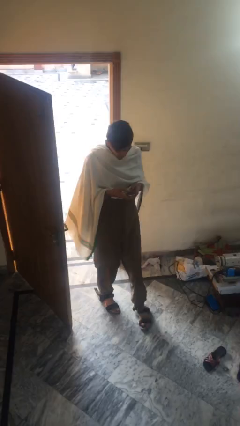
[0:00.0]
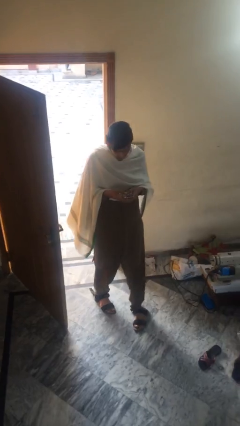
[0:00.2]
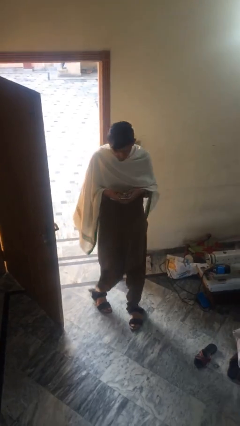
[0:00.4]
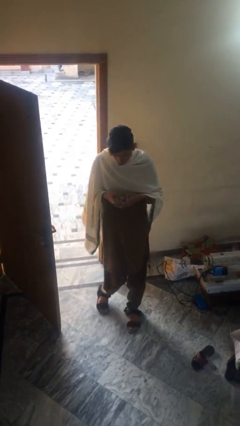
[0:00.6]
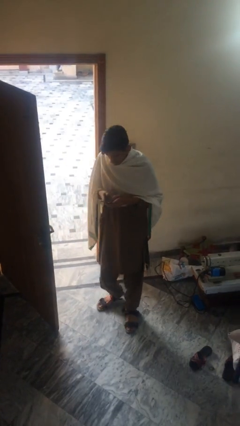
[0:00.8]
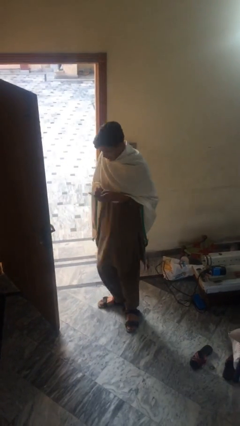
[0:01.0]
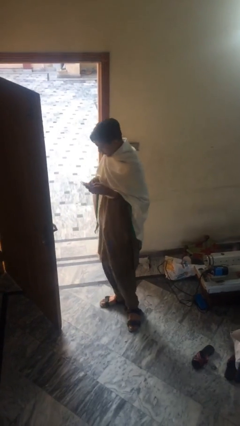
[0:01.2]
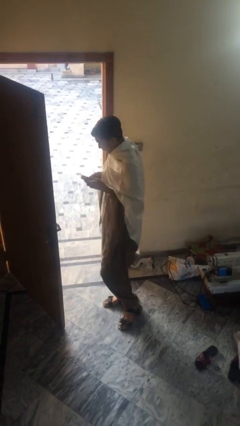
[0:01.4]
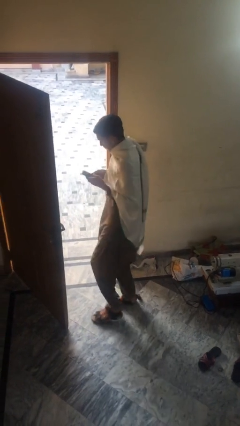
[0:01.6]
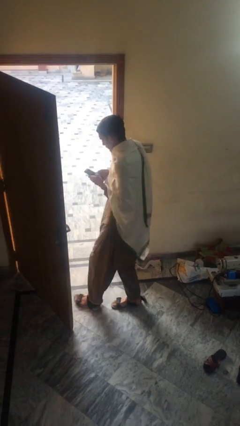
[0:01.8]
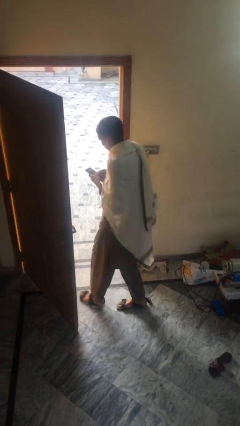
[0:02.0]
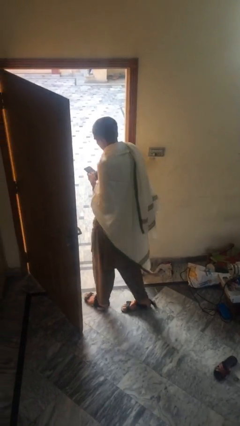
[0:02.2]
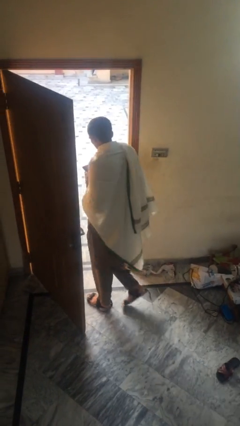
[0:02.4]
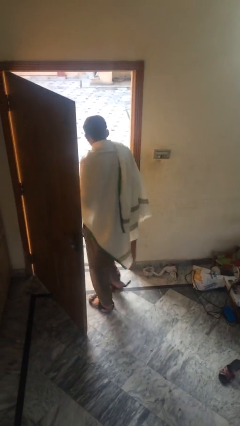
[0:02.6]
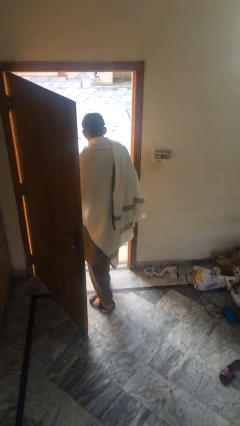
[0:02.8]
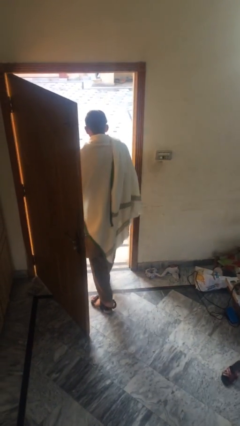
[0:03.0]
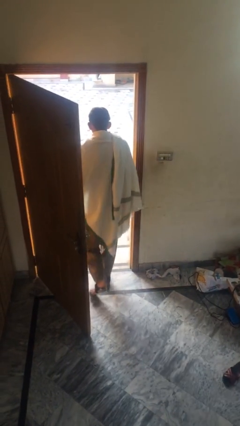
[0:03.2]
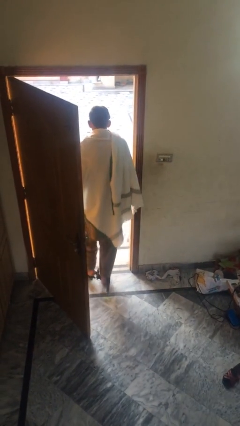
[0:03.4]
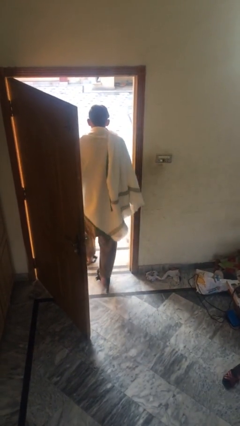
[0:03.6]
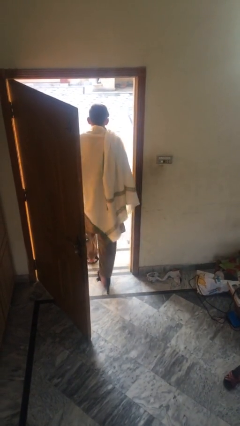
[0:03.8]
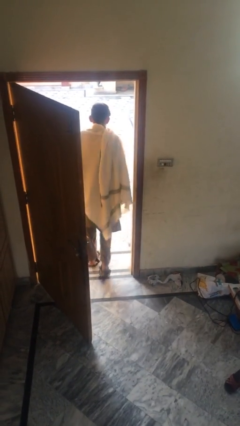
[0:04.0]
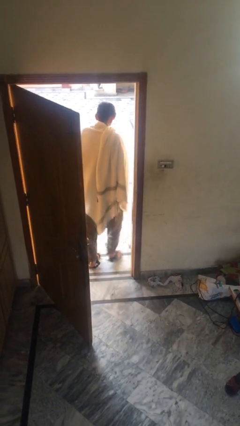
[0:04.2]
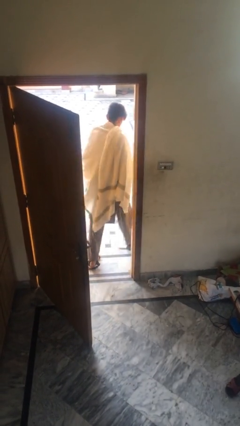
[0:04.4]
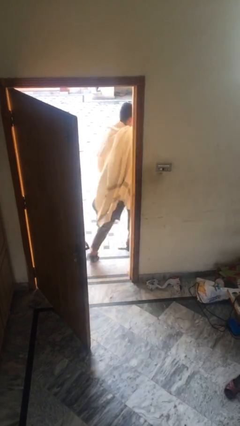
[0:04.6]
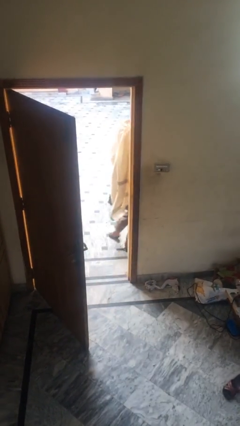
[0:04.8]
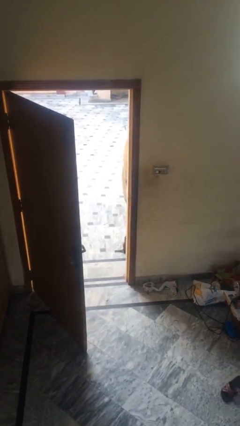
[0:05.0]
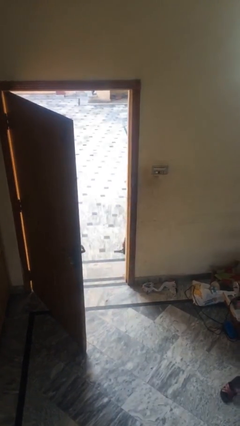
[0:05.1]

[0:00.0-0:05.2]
person exits scene through structure

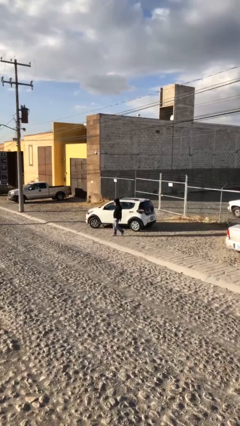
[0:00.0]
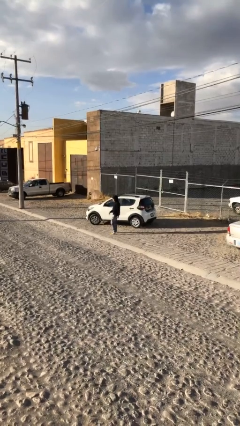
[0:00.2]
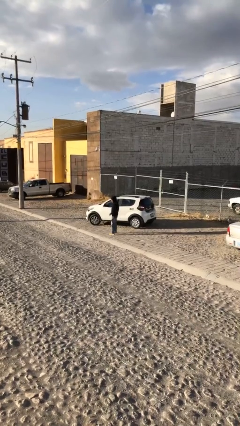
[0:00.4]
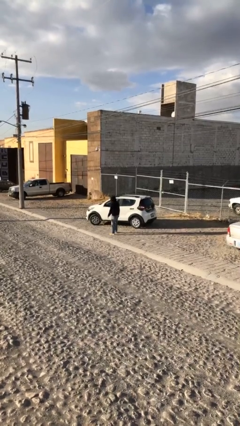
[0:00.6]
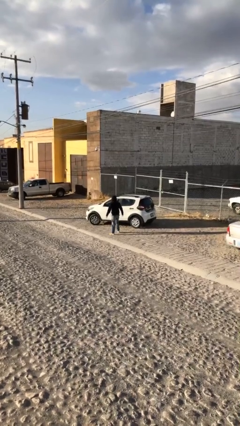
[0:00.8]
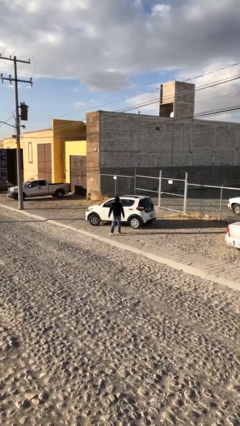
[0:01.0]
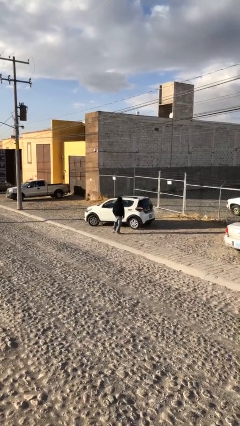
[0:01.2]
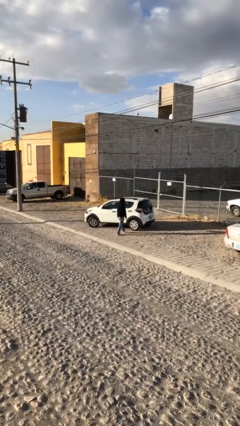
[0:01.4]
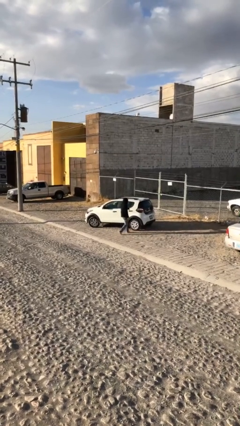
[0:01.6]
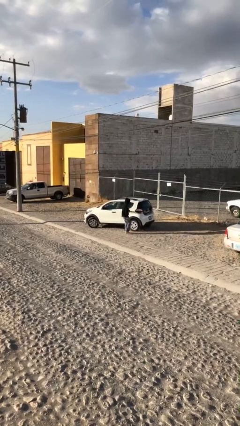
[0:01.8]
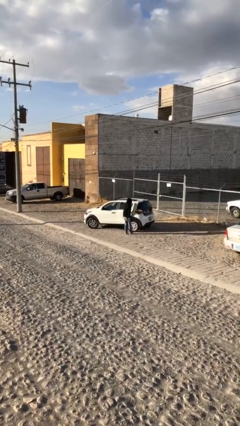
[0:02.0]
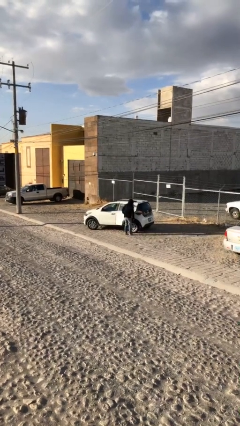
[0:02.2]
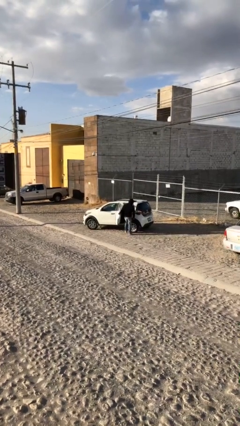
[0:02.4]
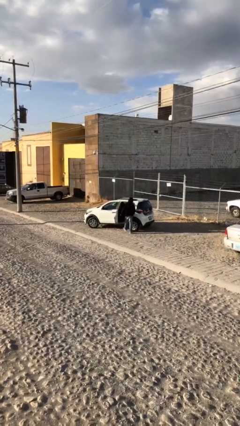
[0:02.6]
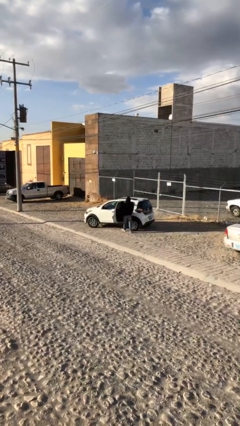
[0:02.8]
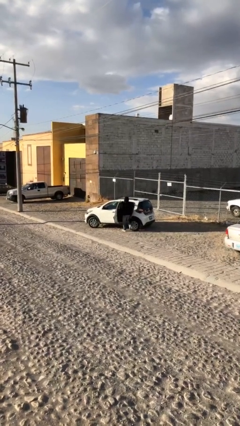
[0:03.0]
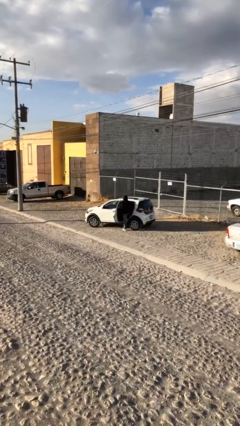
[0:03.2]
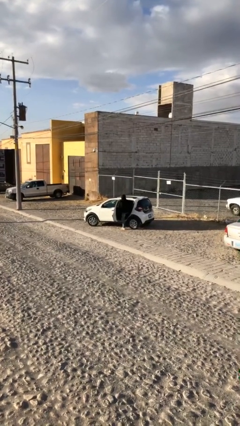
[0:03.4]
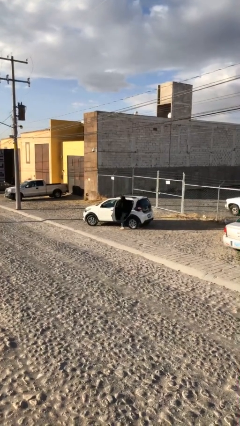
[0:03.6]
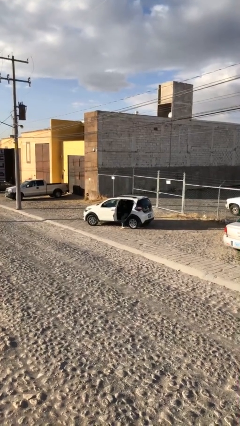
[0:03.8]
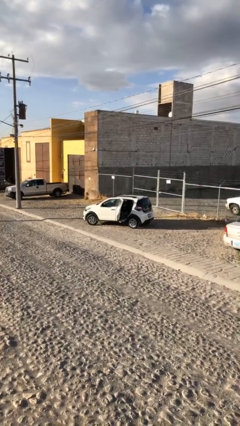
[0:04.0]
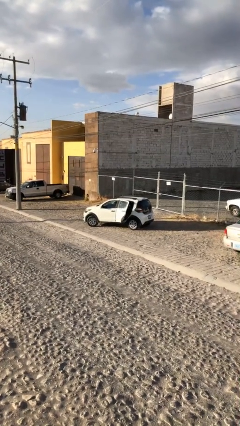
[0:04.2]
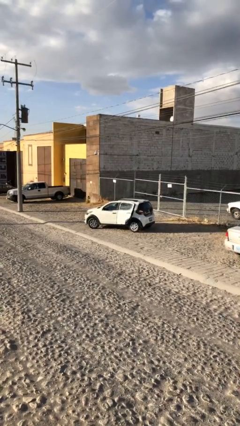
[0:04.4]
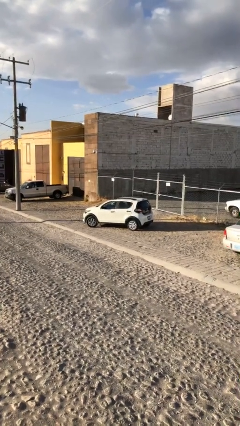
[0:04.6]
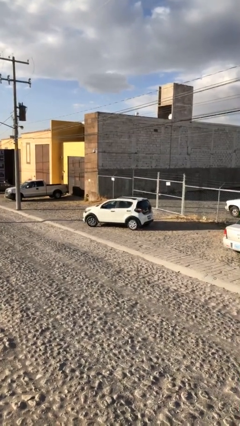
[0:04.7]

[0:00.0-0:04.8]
car picks up person

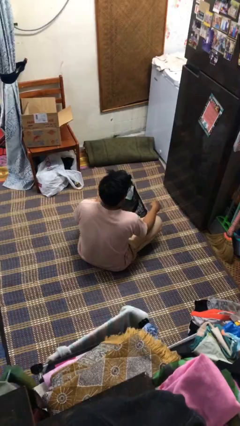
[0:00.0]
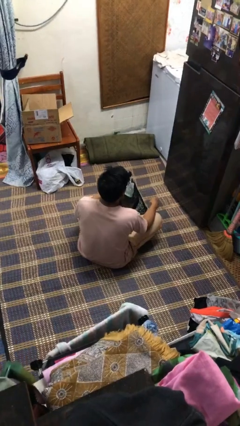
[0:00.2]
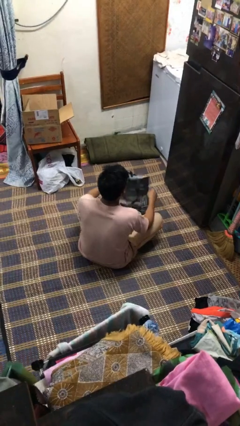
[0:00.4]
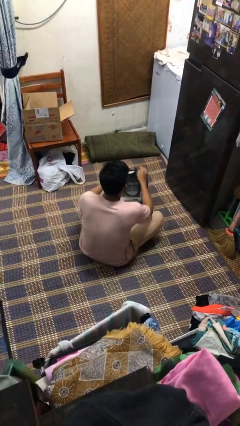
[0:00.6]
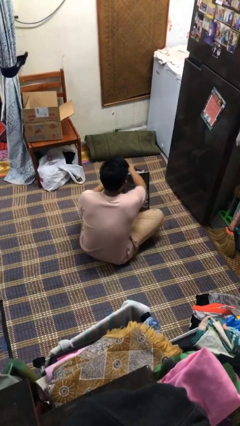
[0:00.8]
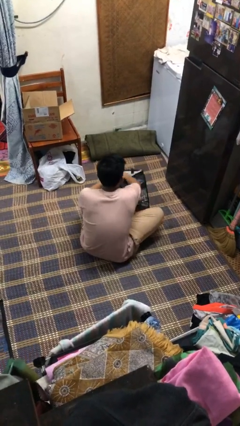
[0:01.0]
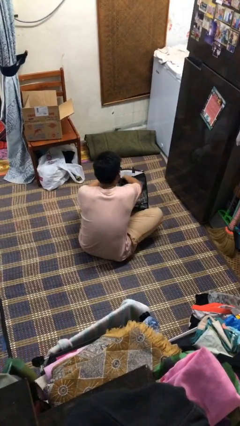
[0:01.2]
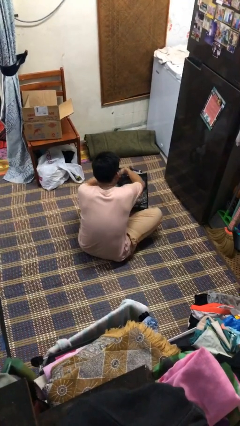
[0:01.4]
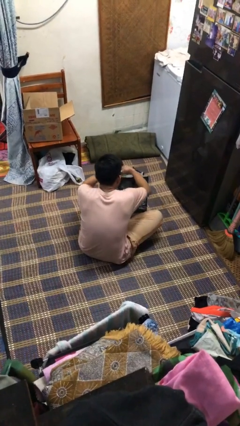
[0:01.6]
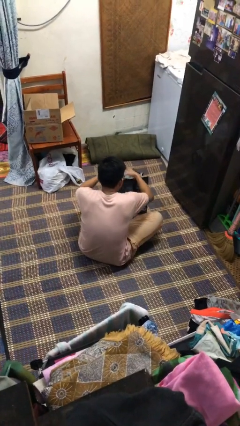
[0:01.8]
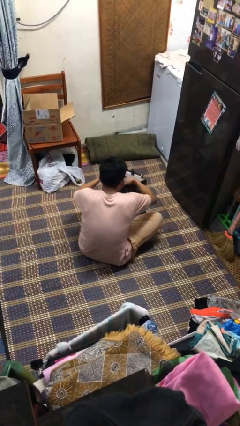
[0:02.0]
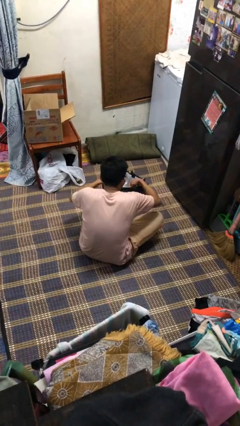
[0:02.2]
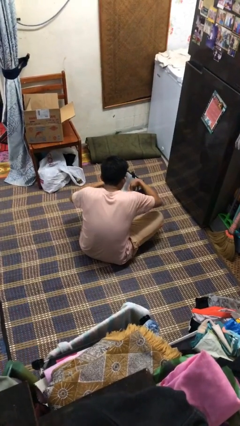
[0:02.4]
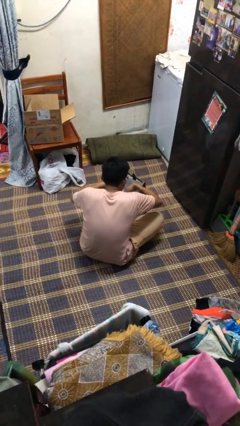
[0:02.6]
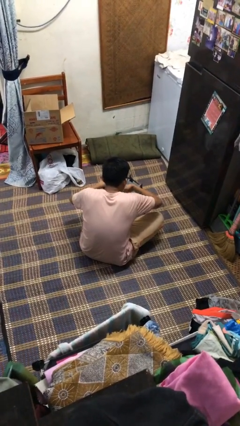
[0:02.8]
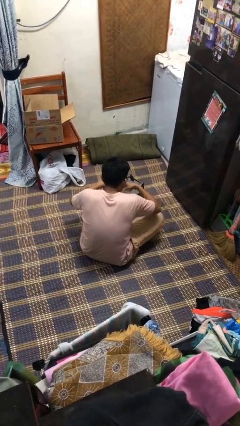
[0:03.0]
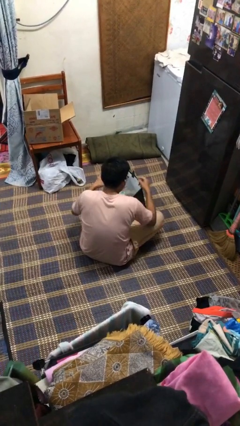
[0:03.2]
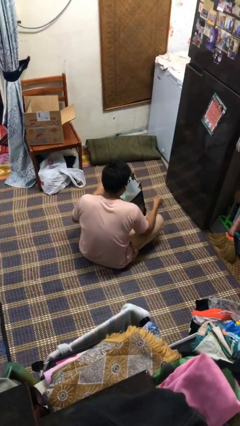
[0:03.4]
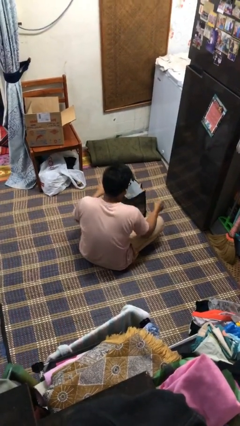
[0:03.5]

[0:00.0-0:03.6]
person searches in bag

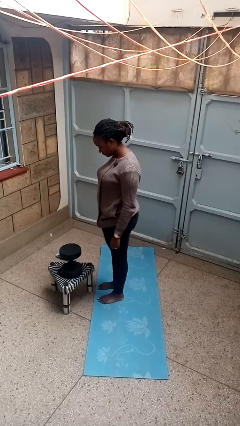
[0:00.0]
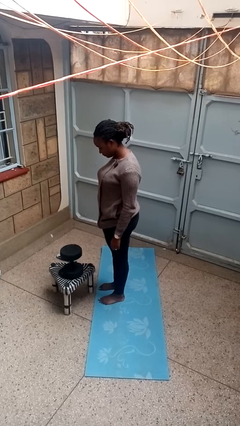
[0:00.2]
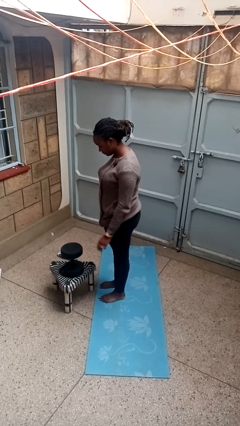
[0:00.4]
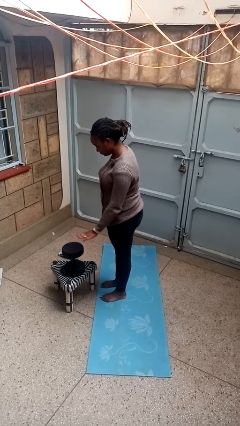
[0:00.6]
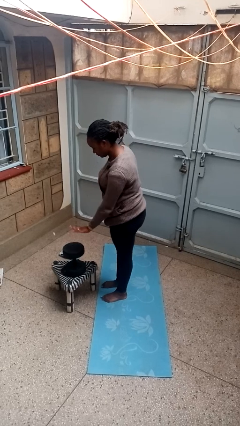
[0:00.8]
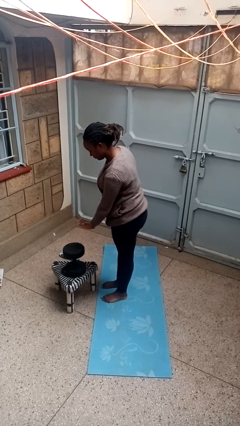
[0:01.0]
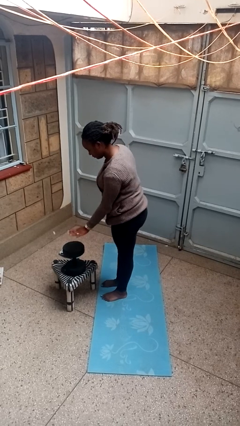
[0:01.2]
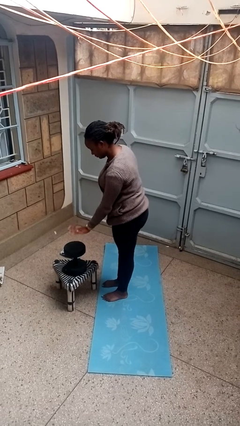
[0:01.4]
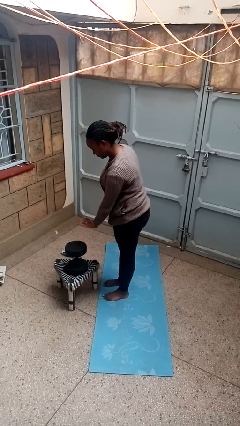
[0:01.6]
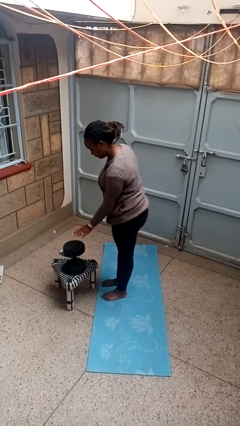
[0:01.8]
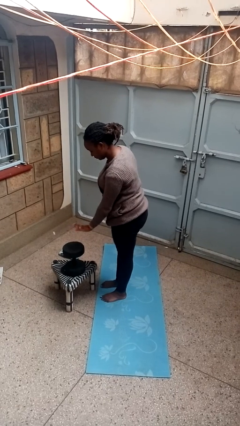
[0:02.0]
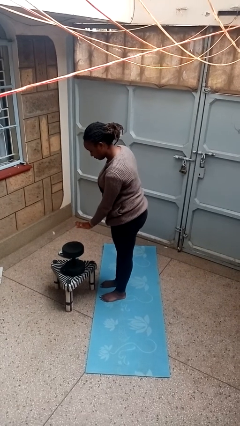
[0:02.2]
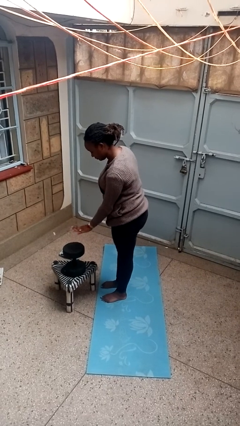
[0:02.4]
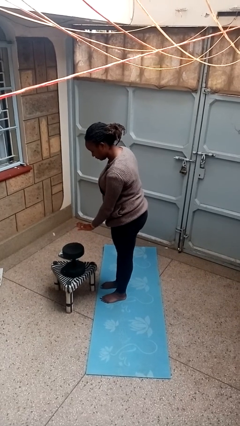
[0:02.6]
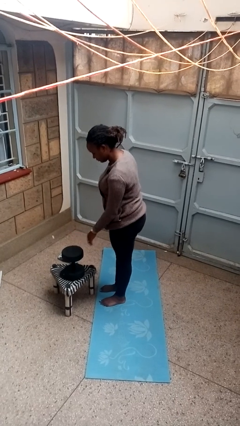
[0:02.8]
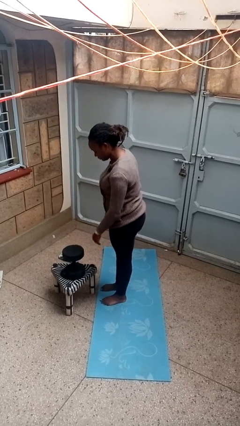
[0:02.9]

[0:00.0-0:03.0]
person waves hand over object

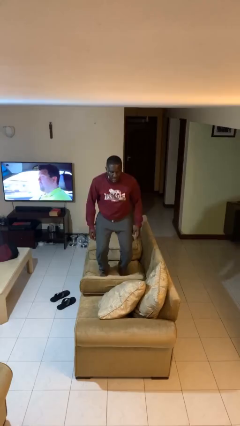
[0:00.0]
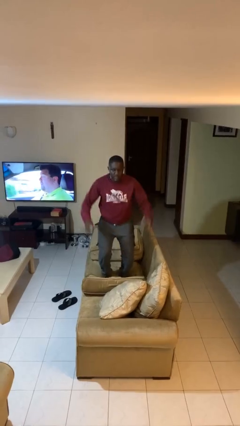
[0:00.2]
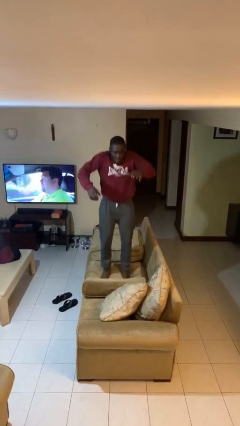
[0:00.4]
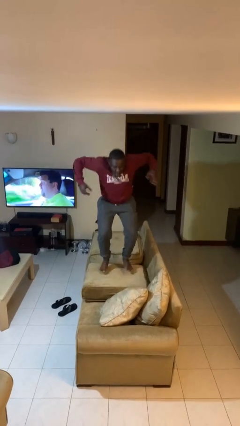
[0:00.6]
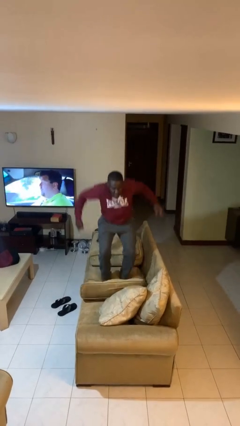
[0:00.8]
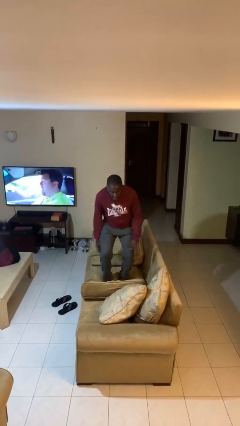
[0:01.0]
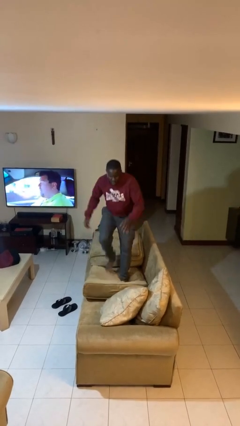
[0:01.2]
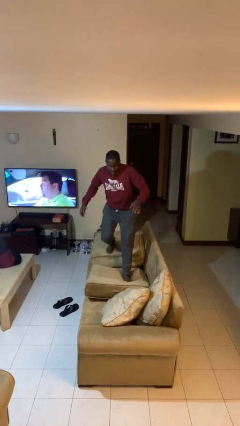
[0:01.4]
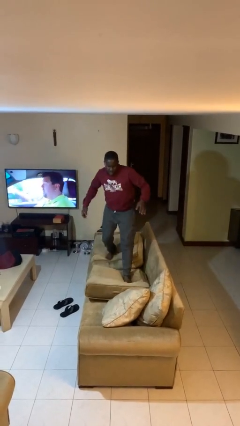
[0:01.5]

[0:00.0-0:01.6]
person jumps on couch
